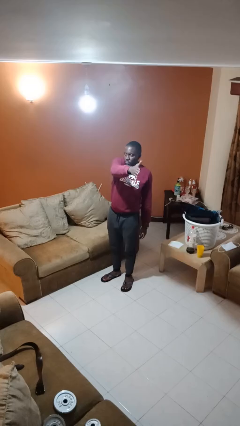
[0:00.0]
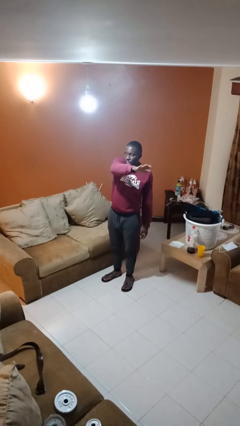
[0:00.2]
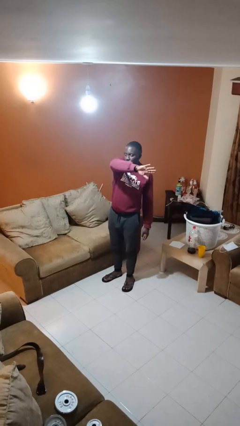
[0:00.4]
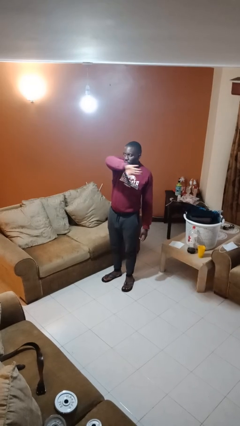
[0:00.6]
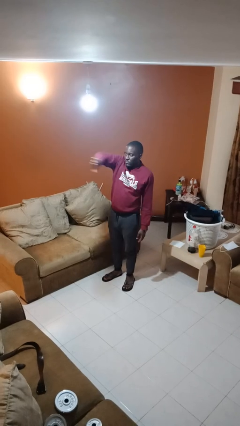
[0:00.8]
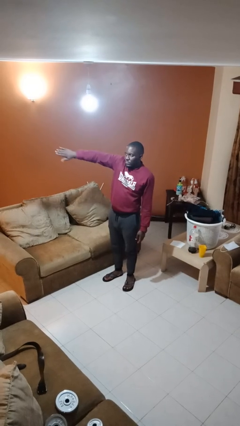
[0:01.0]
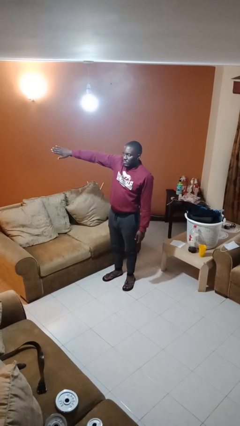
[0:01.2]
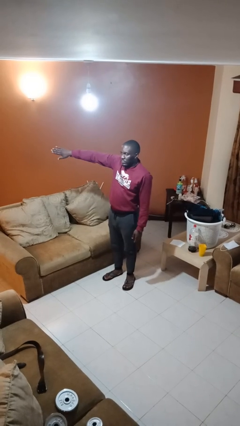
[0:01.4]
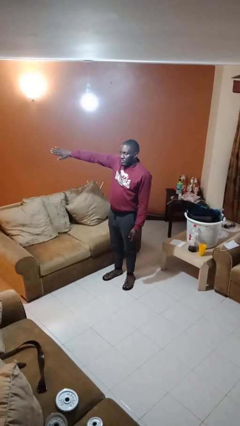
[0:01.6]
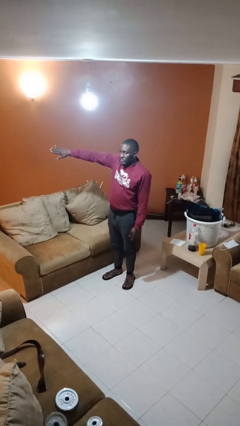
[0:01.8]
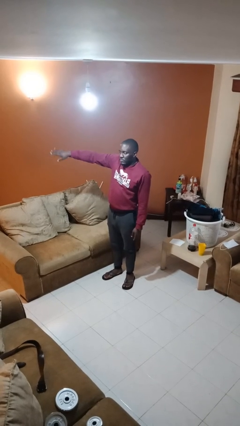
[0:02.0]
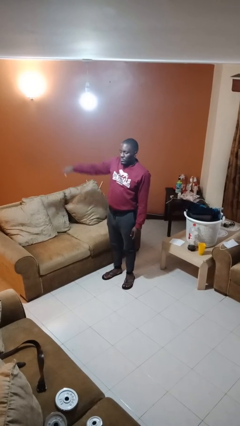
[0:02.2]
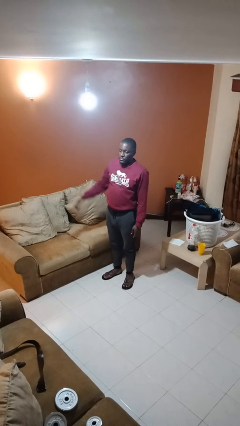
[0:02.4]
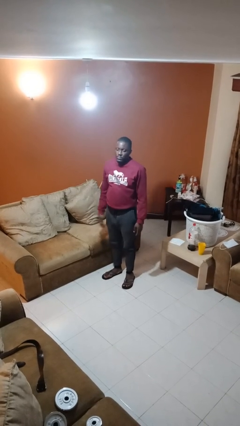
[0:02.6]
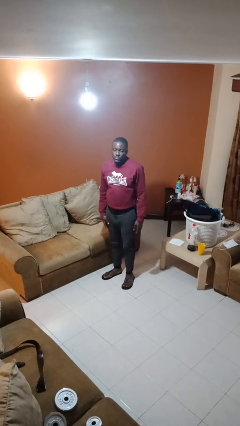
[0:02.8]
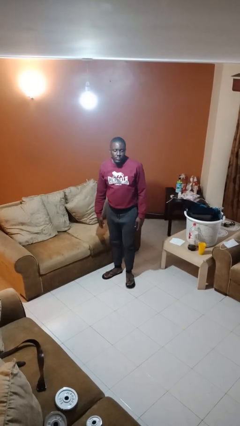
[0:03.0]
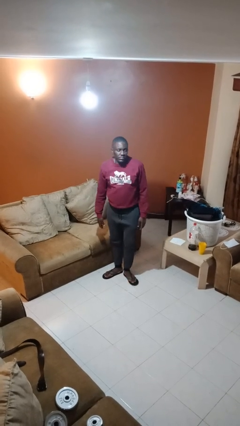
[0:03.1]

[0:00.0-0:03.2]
person gestures swipe right

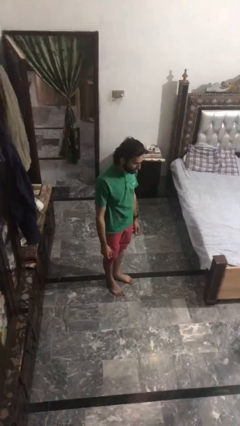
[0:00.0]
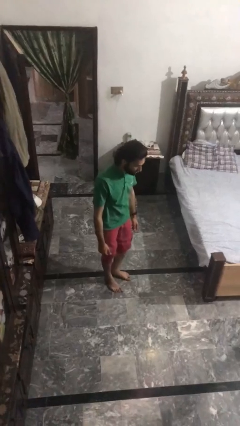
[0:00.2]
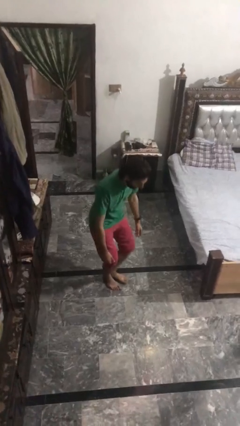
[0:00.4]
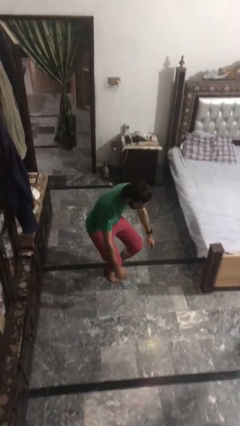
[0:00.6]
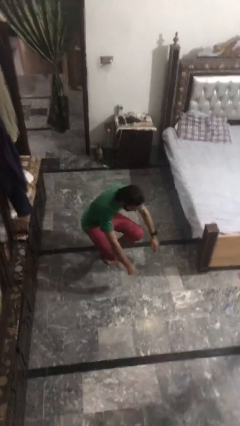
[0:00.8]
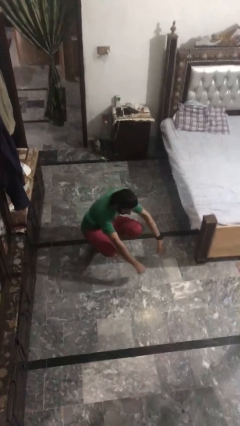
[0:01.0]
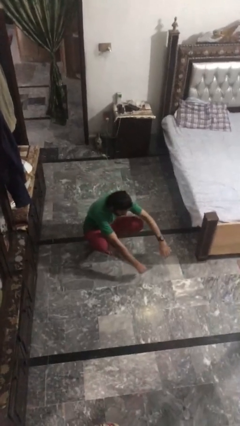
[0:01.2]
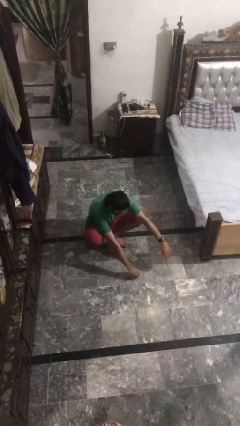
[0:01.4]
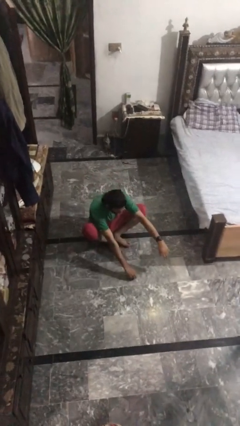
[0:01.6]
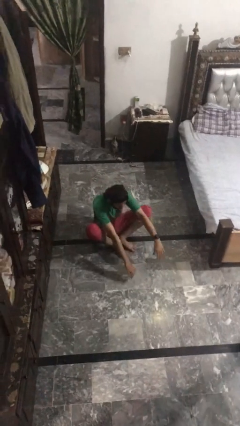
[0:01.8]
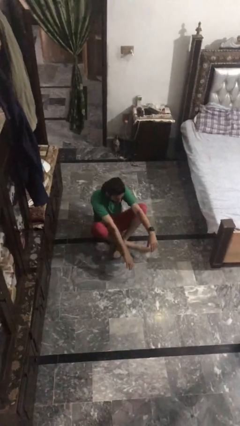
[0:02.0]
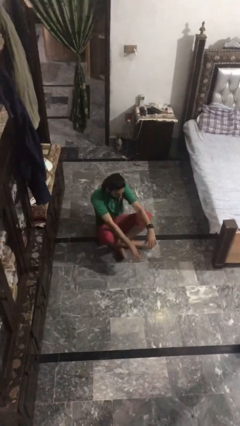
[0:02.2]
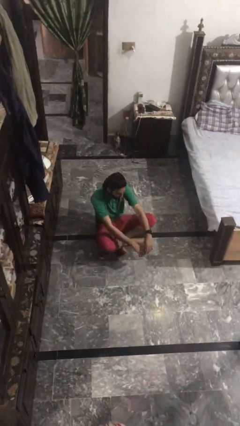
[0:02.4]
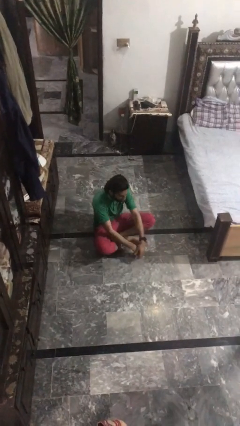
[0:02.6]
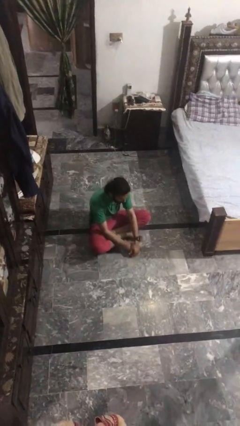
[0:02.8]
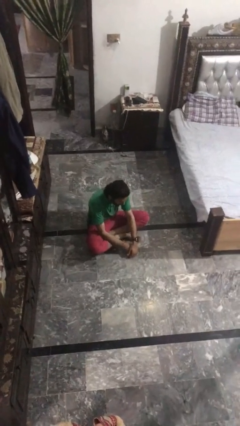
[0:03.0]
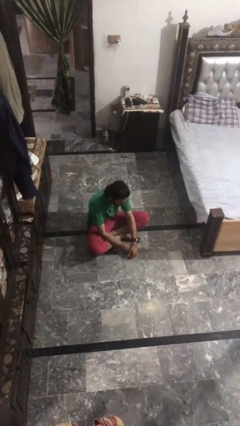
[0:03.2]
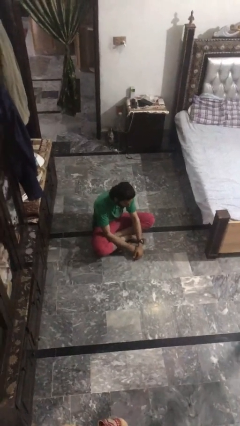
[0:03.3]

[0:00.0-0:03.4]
person sits crisscross

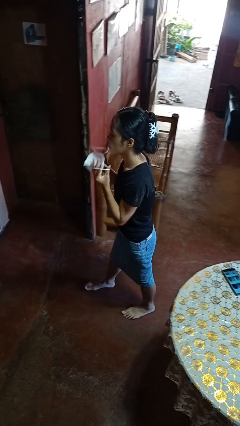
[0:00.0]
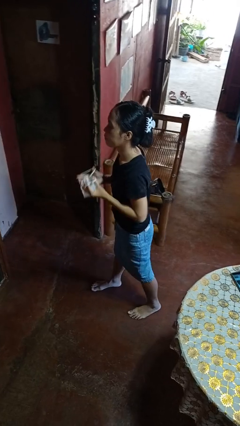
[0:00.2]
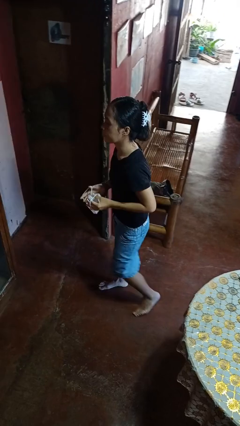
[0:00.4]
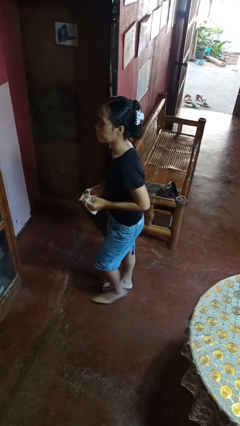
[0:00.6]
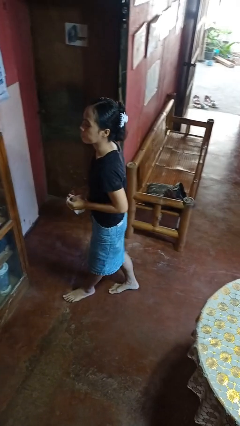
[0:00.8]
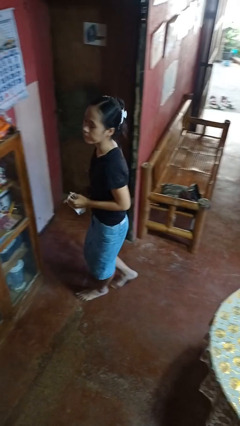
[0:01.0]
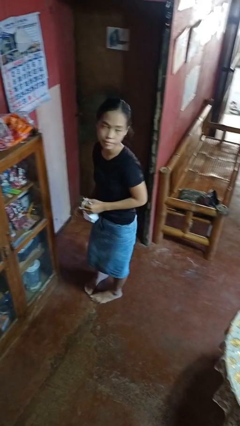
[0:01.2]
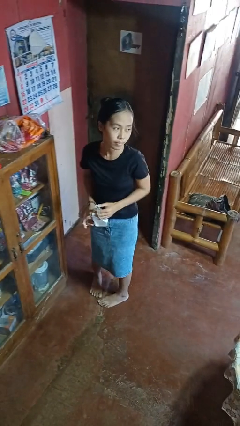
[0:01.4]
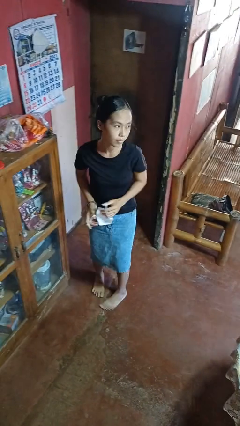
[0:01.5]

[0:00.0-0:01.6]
person takes off facemask

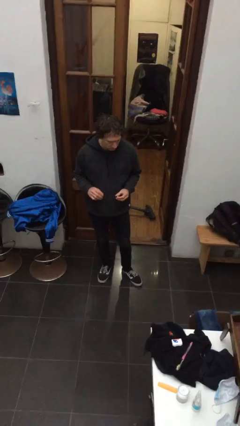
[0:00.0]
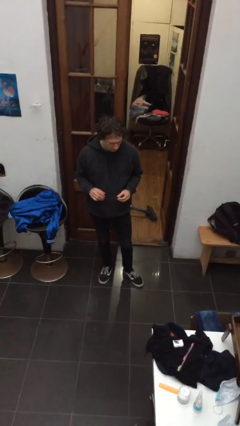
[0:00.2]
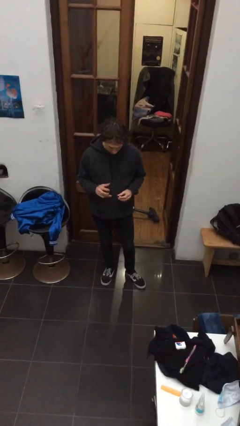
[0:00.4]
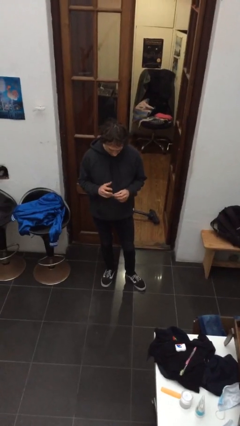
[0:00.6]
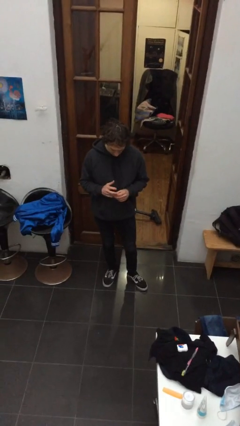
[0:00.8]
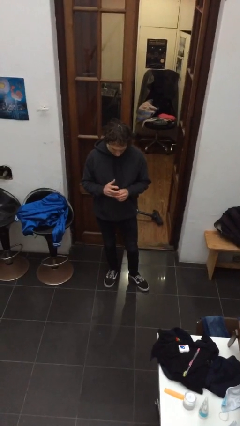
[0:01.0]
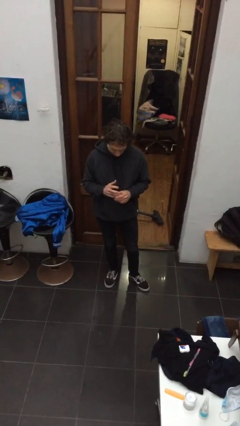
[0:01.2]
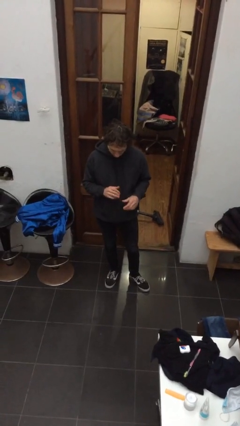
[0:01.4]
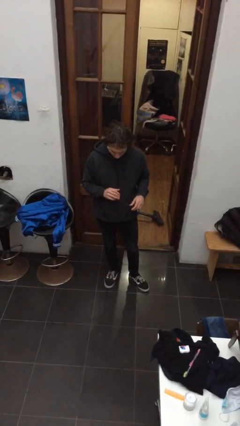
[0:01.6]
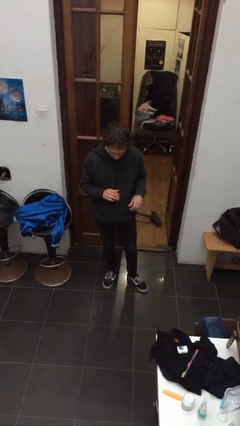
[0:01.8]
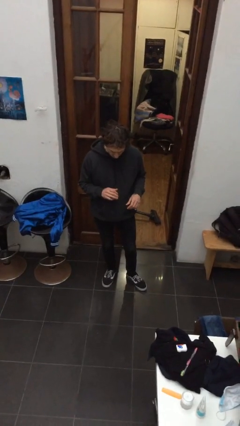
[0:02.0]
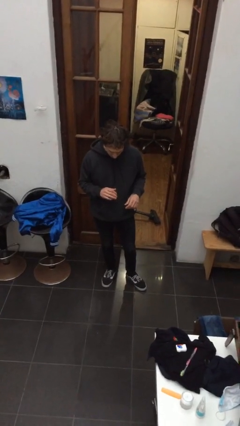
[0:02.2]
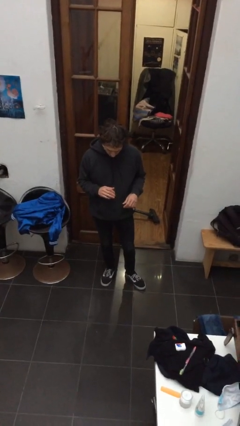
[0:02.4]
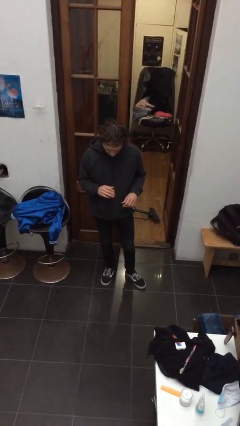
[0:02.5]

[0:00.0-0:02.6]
person puts on ring

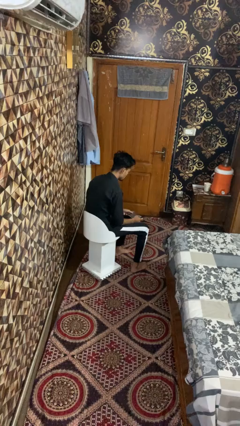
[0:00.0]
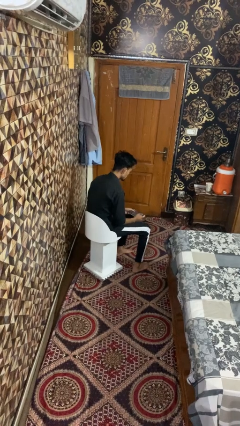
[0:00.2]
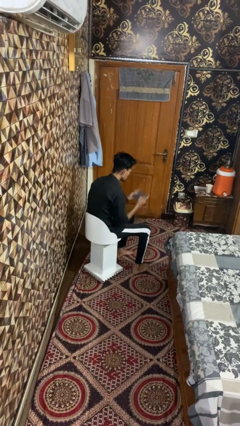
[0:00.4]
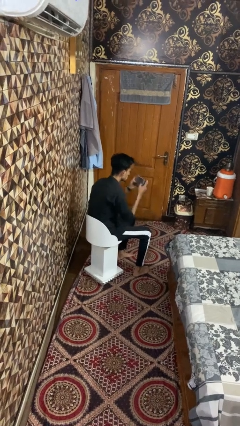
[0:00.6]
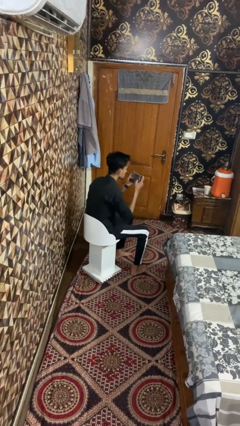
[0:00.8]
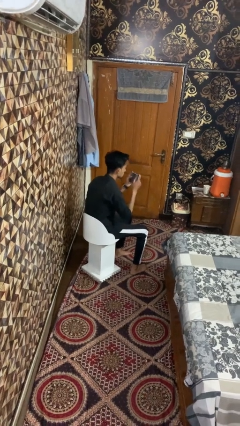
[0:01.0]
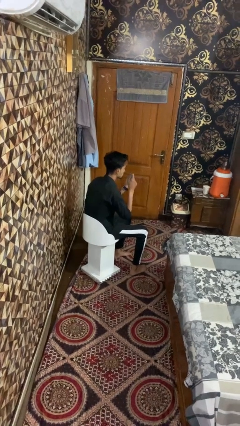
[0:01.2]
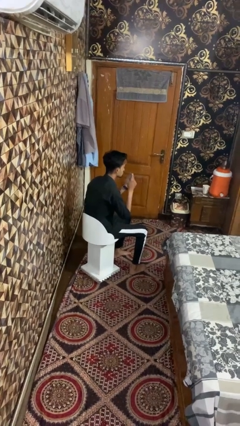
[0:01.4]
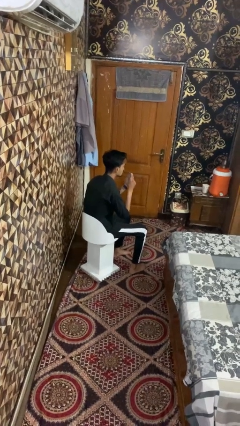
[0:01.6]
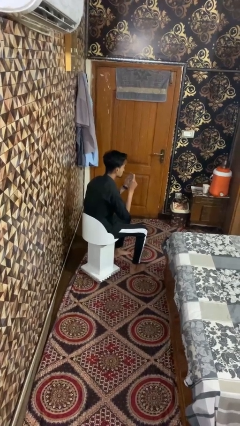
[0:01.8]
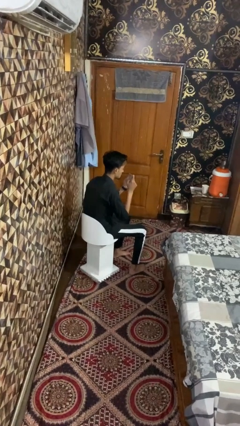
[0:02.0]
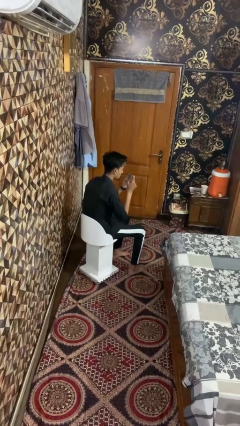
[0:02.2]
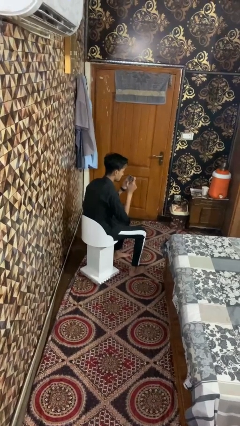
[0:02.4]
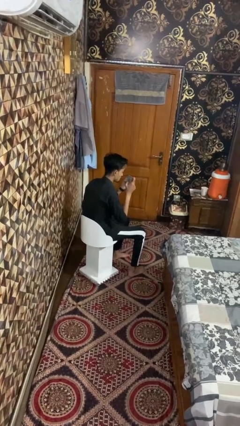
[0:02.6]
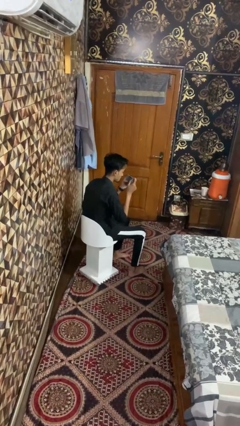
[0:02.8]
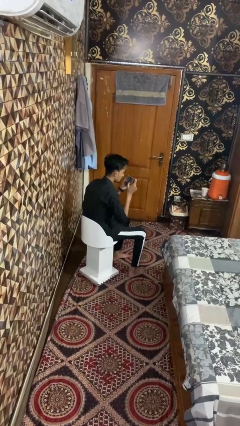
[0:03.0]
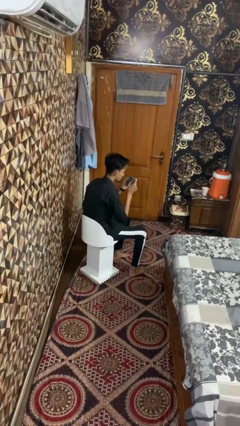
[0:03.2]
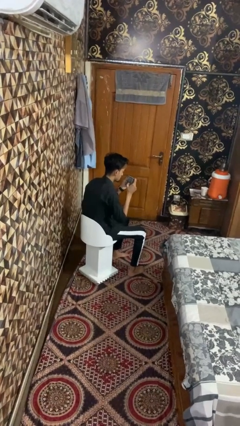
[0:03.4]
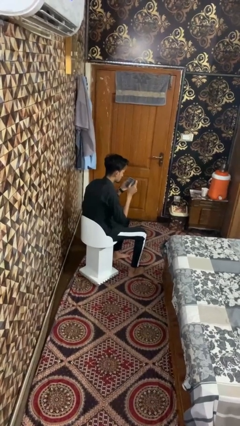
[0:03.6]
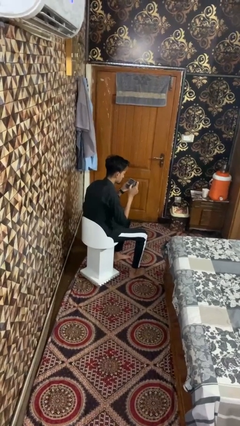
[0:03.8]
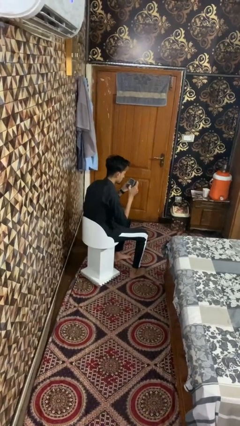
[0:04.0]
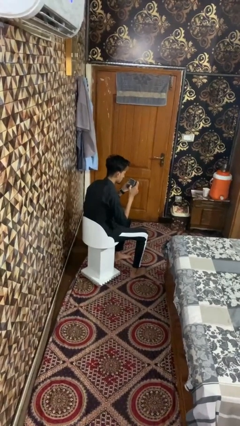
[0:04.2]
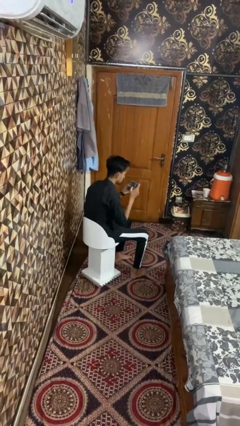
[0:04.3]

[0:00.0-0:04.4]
person interacts with tablet

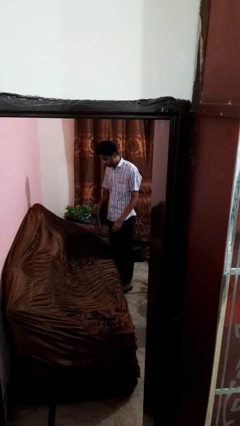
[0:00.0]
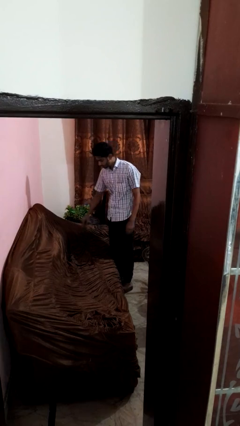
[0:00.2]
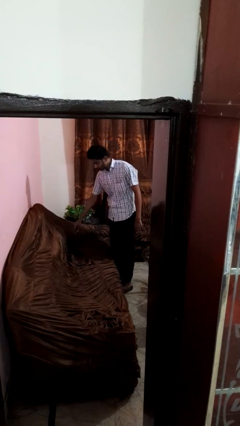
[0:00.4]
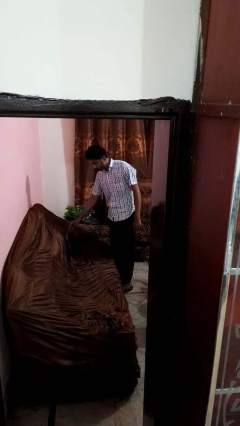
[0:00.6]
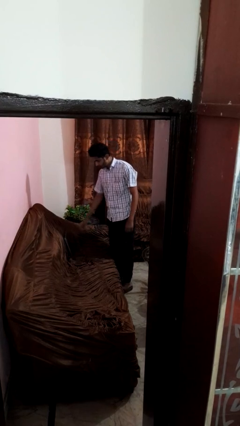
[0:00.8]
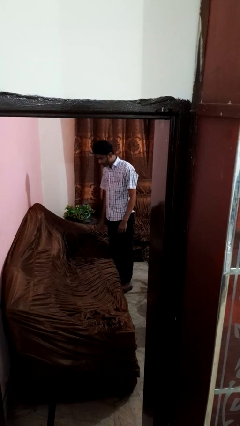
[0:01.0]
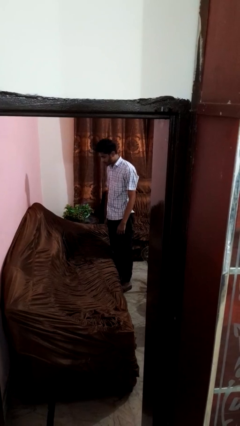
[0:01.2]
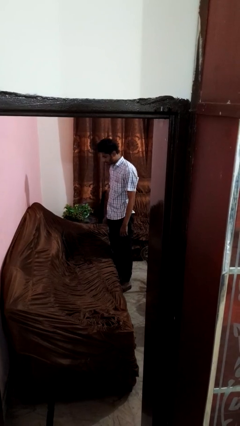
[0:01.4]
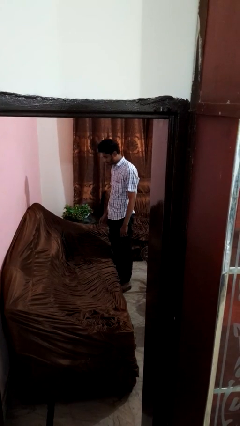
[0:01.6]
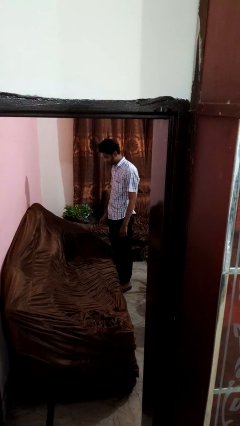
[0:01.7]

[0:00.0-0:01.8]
person puts down object on couch
